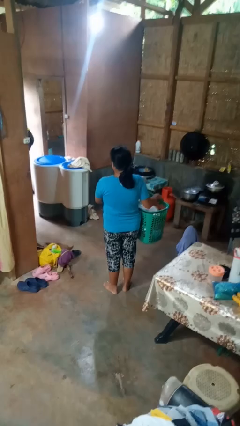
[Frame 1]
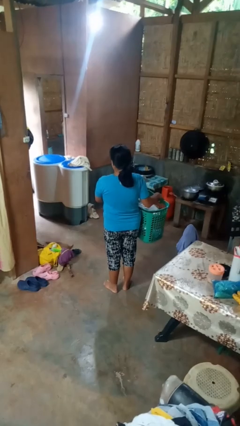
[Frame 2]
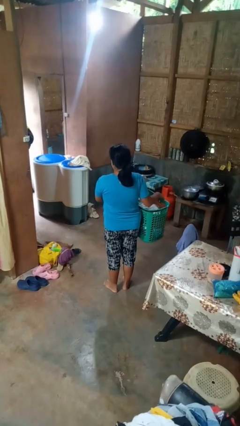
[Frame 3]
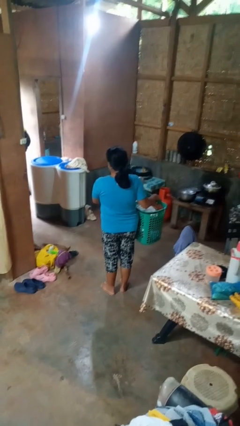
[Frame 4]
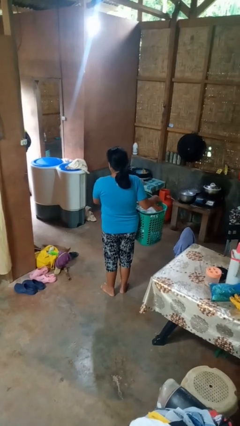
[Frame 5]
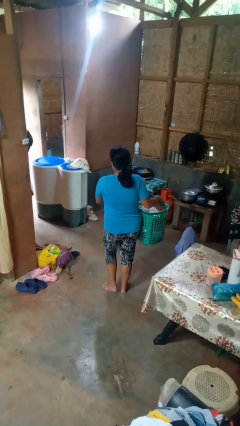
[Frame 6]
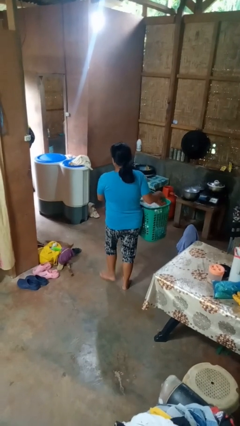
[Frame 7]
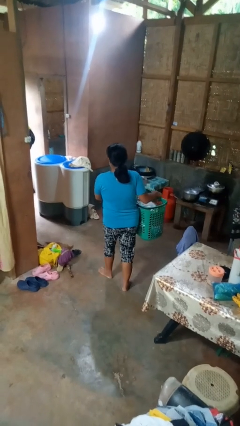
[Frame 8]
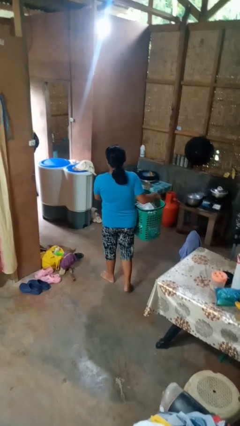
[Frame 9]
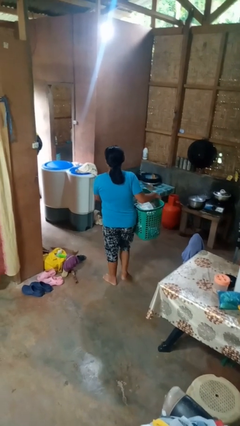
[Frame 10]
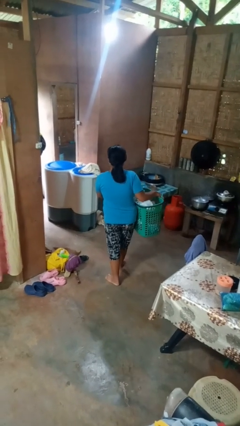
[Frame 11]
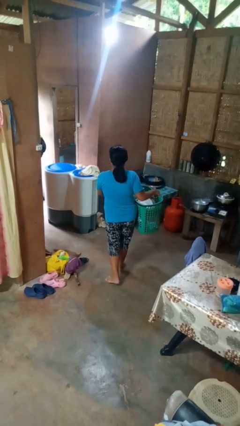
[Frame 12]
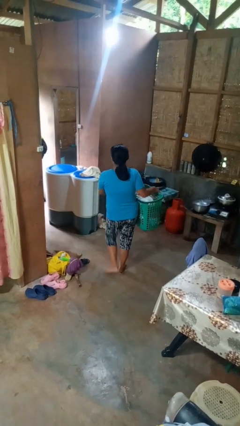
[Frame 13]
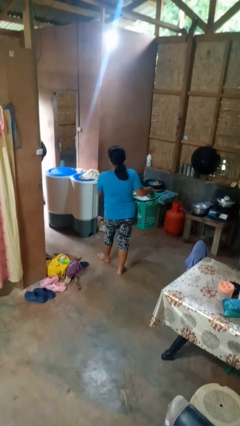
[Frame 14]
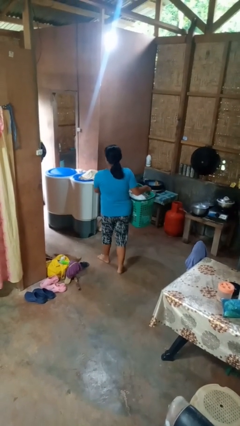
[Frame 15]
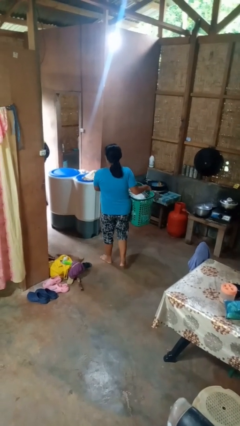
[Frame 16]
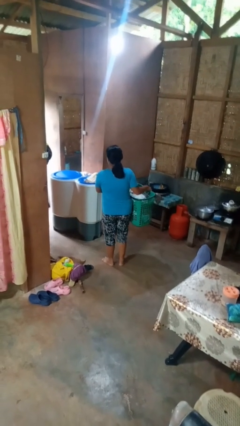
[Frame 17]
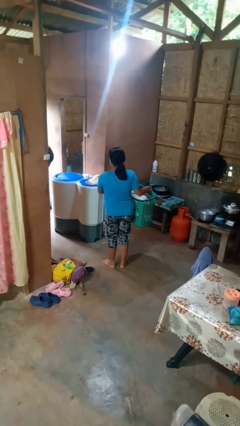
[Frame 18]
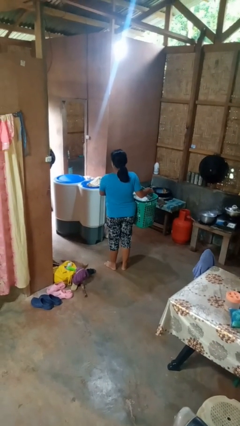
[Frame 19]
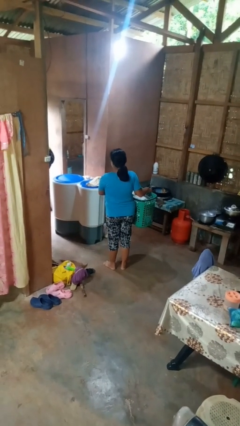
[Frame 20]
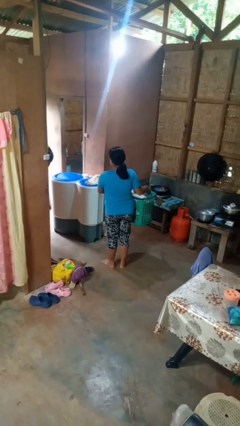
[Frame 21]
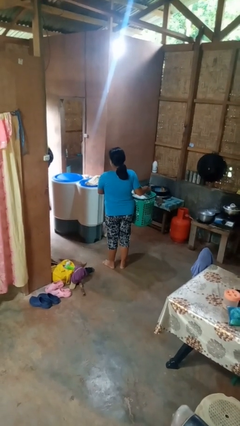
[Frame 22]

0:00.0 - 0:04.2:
person carries laundry basket

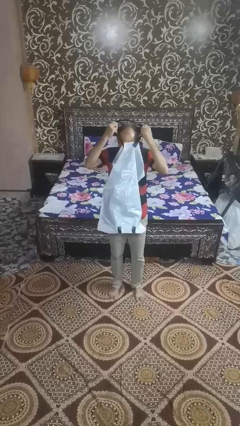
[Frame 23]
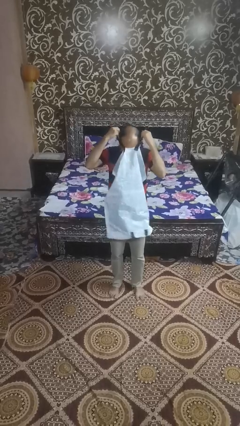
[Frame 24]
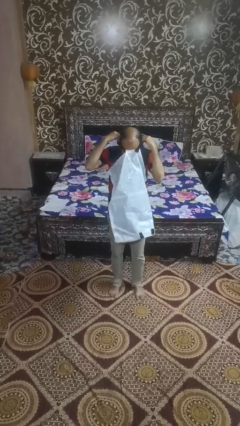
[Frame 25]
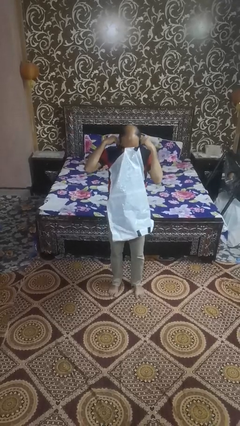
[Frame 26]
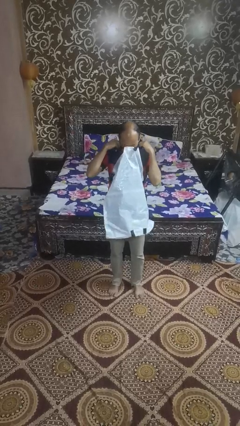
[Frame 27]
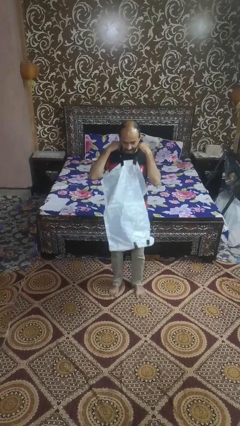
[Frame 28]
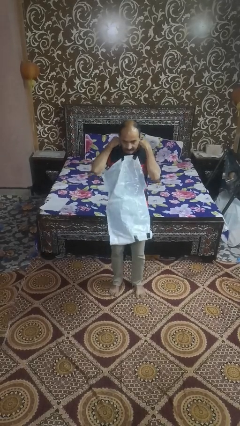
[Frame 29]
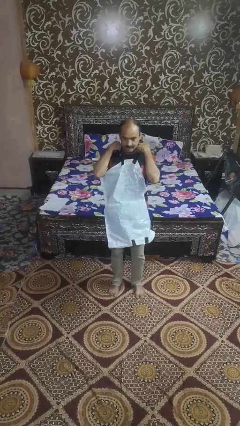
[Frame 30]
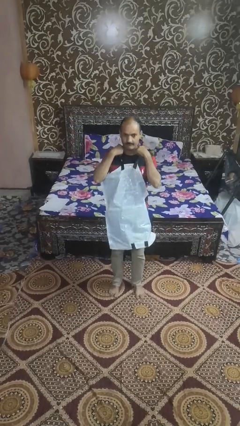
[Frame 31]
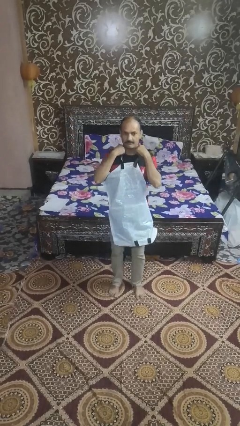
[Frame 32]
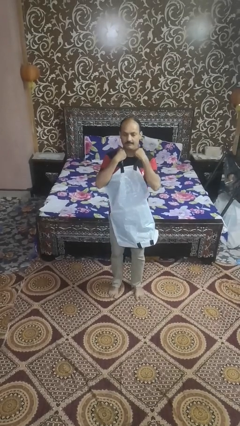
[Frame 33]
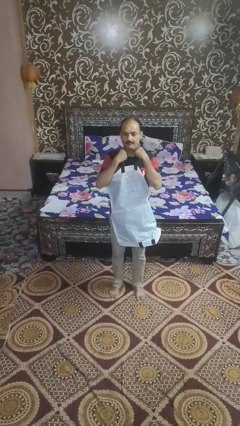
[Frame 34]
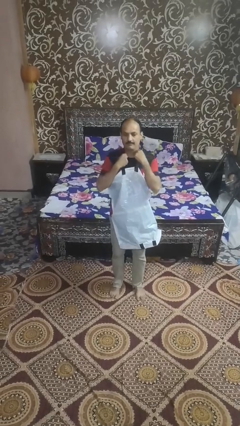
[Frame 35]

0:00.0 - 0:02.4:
person tears paper

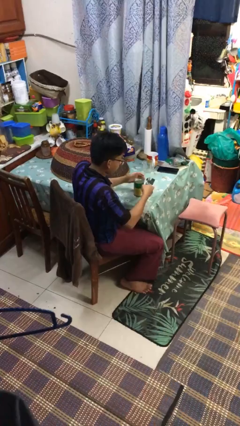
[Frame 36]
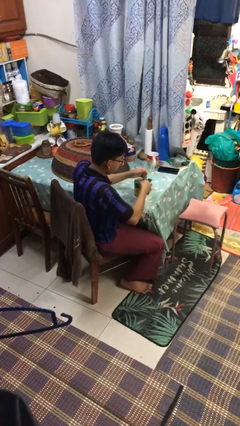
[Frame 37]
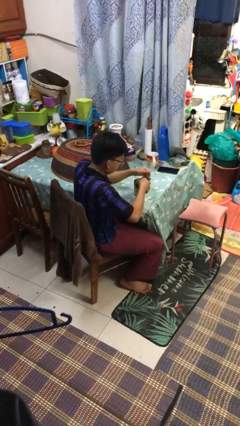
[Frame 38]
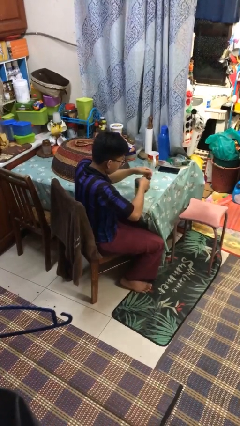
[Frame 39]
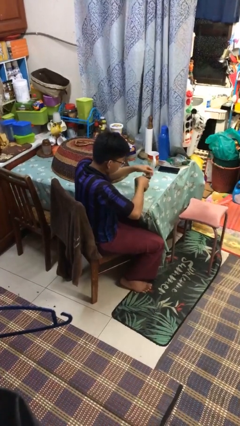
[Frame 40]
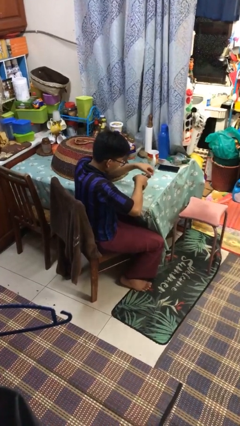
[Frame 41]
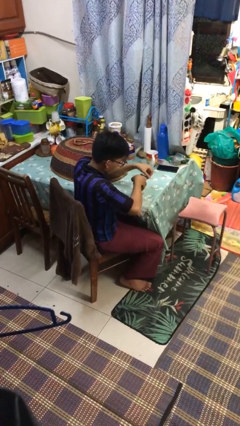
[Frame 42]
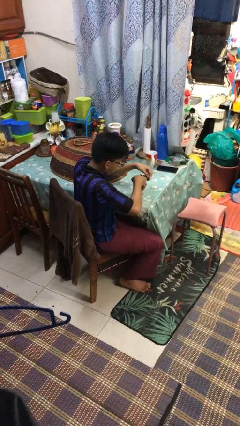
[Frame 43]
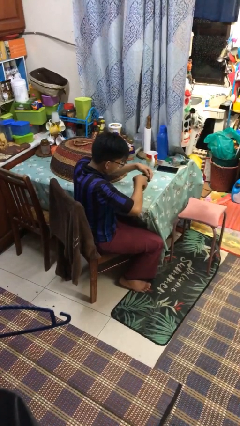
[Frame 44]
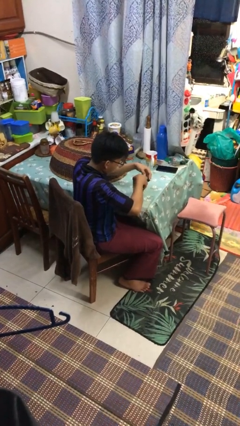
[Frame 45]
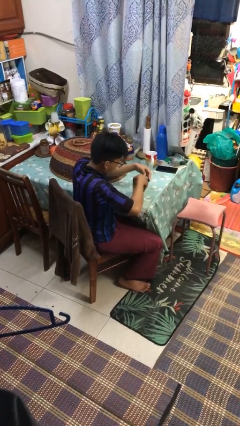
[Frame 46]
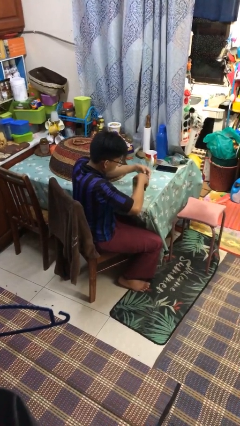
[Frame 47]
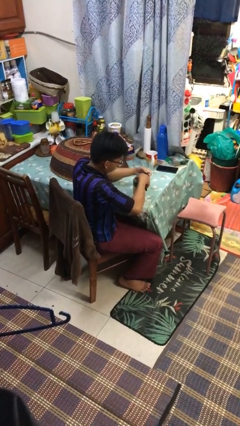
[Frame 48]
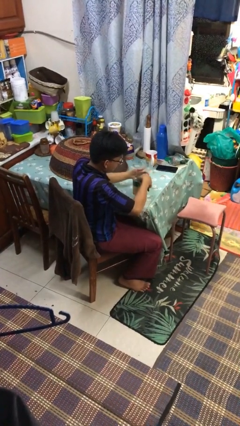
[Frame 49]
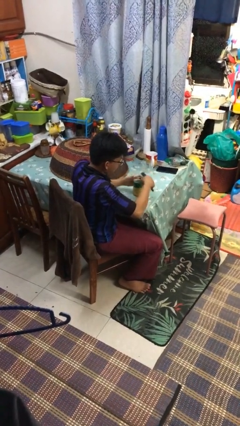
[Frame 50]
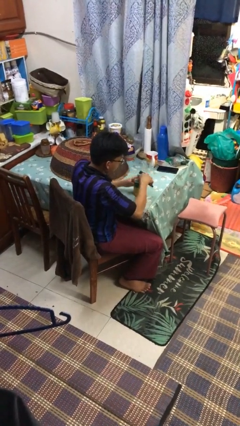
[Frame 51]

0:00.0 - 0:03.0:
person opens can with can opener

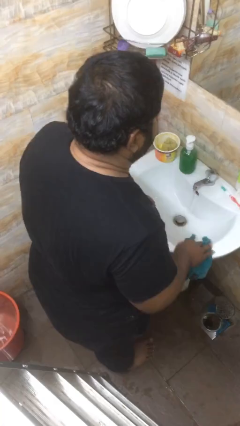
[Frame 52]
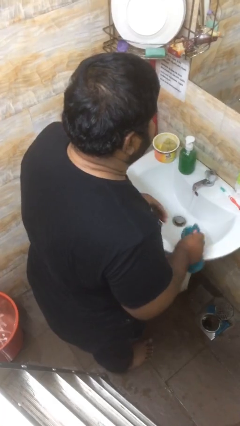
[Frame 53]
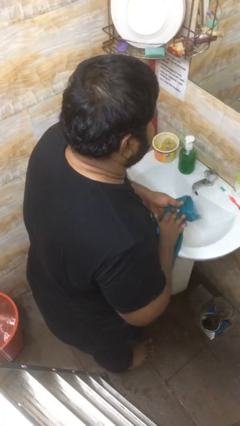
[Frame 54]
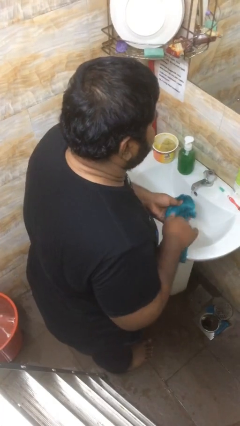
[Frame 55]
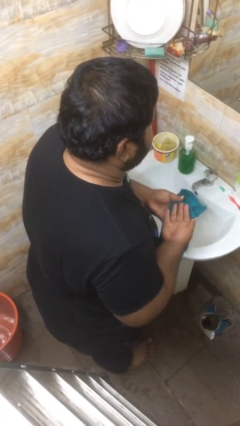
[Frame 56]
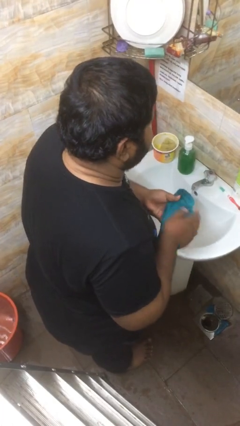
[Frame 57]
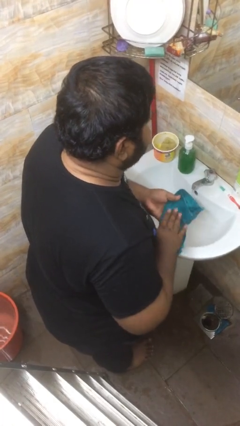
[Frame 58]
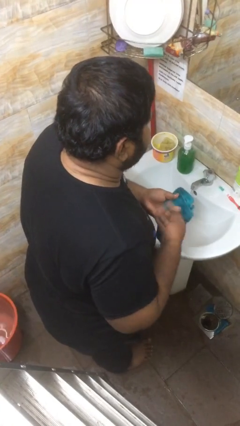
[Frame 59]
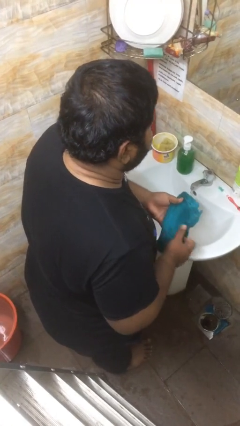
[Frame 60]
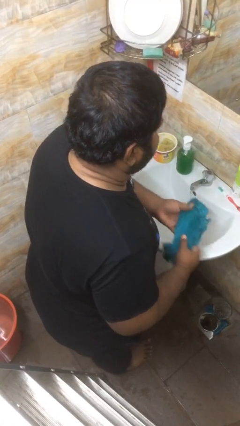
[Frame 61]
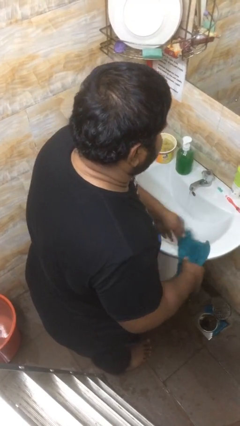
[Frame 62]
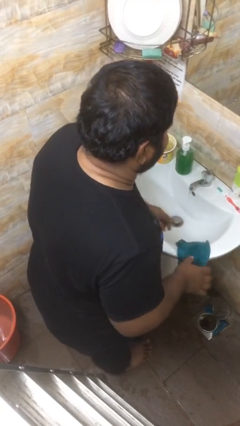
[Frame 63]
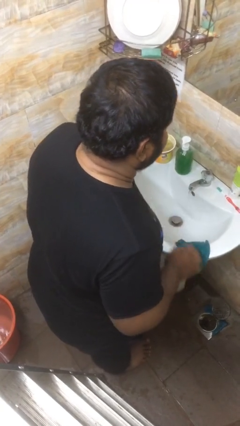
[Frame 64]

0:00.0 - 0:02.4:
person dries hands with towel

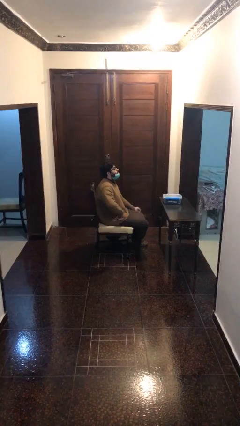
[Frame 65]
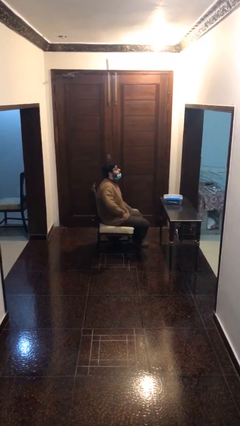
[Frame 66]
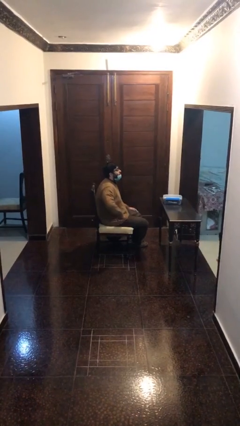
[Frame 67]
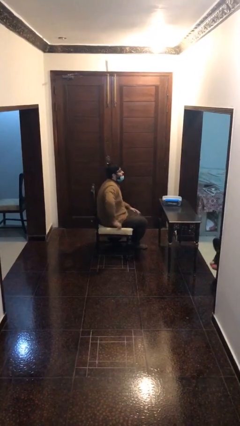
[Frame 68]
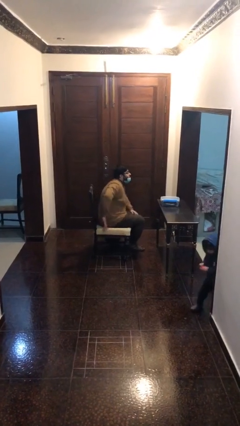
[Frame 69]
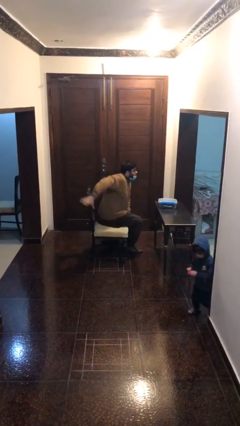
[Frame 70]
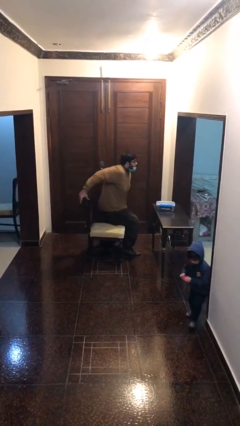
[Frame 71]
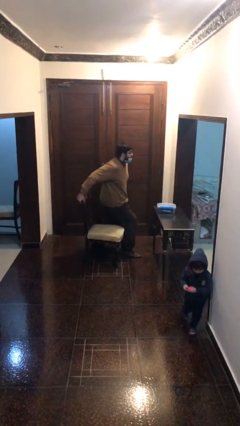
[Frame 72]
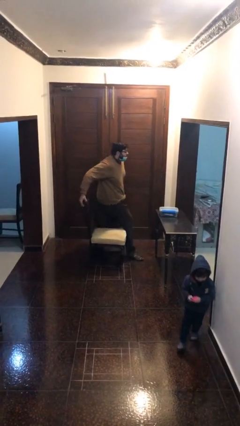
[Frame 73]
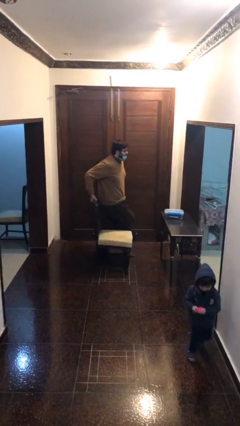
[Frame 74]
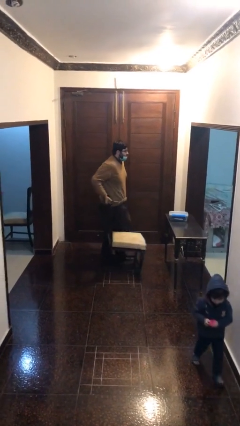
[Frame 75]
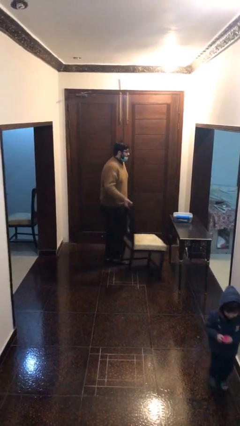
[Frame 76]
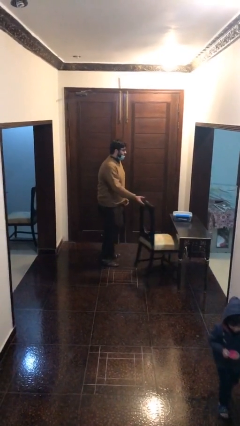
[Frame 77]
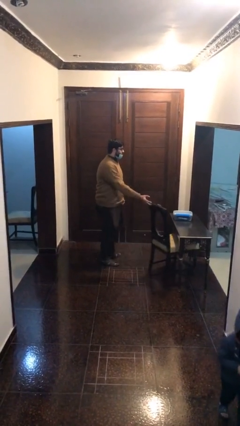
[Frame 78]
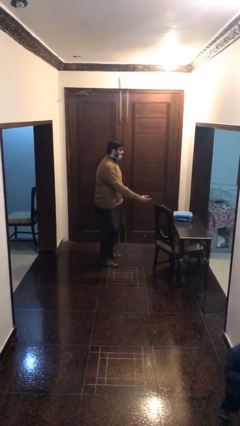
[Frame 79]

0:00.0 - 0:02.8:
person stands up

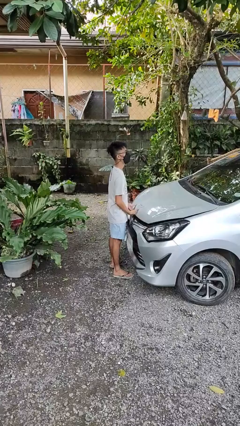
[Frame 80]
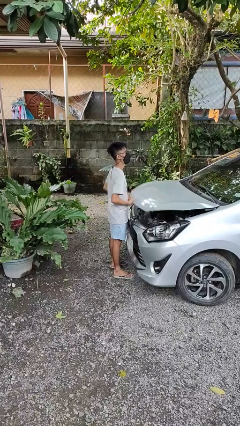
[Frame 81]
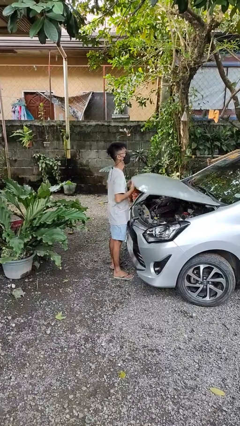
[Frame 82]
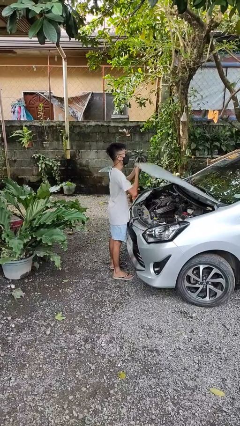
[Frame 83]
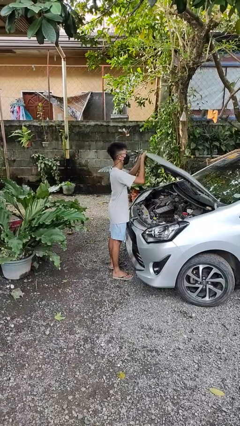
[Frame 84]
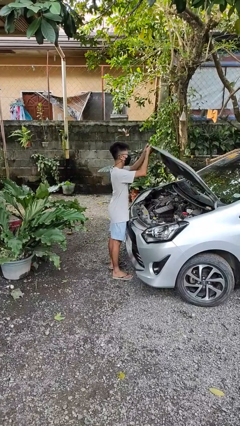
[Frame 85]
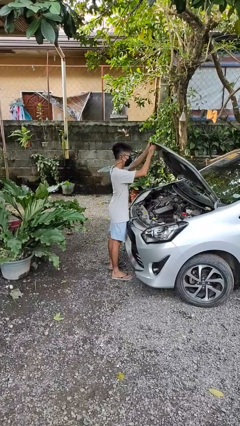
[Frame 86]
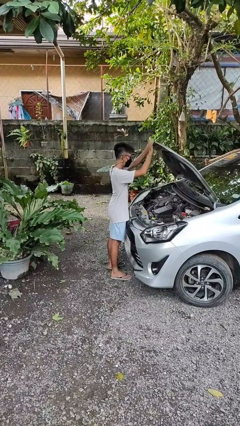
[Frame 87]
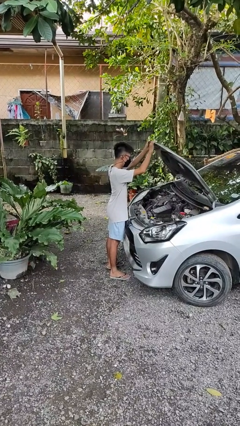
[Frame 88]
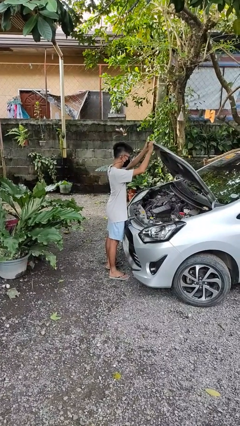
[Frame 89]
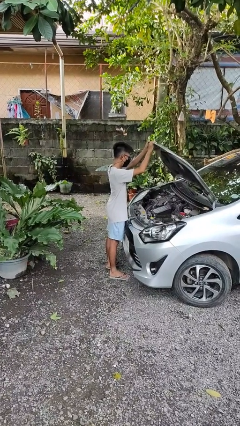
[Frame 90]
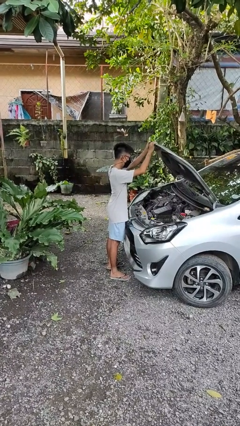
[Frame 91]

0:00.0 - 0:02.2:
person opens car hood
